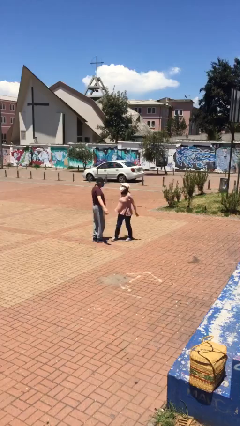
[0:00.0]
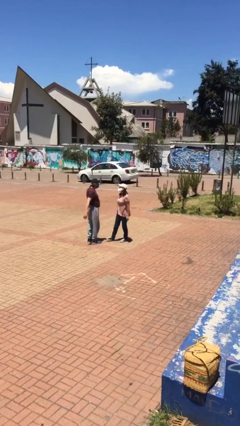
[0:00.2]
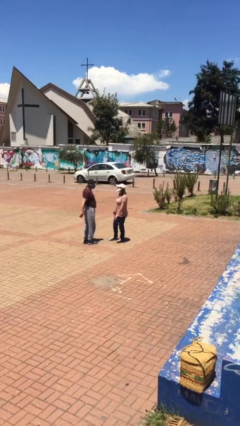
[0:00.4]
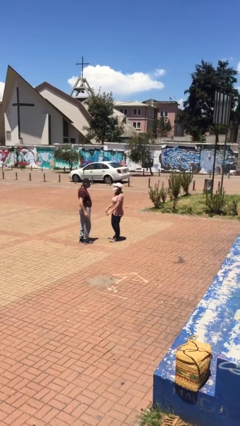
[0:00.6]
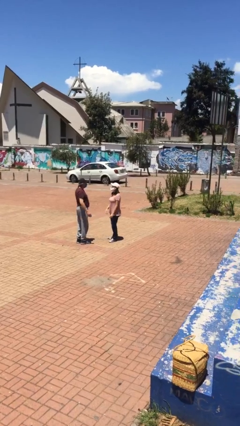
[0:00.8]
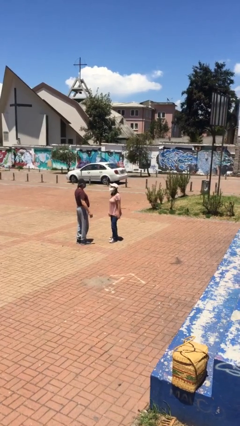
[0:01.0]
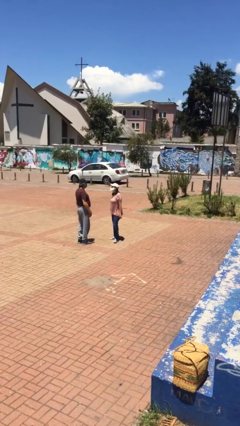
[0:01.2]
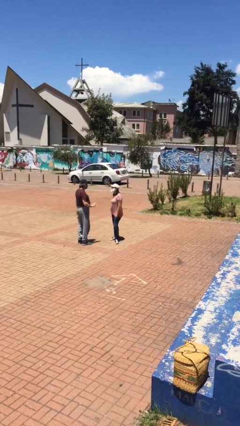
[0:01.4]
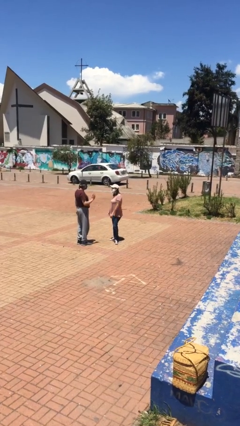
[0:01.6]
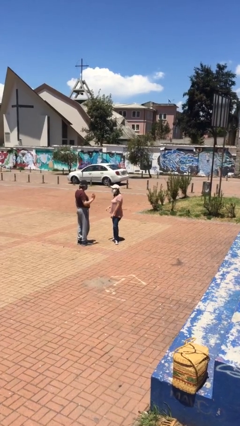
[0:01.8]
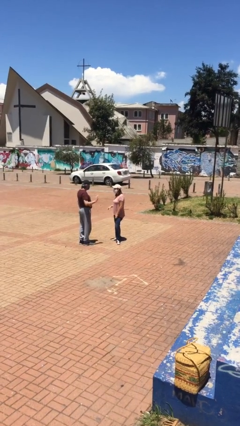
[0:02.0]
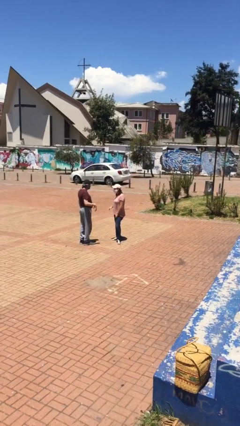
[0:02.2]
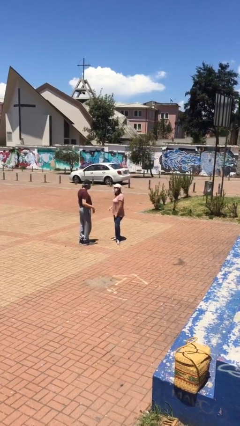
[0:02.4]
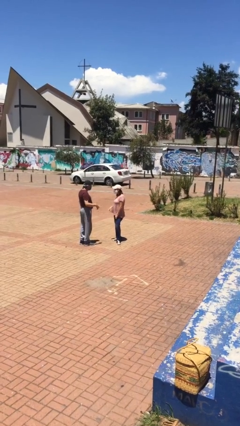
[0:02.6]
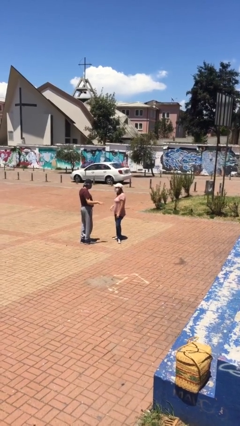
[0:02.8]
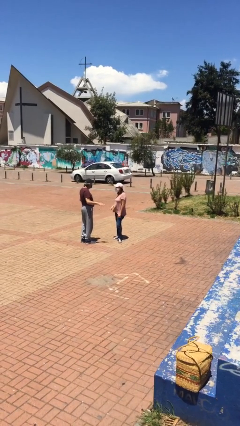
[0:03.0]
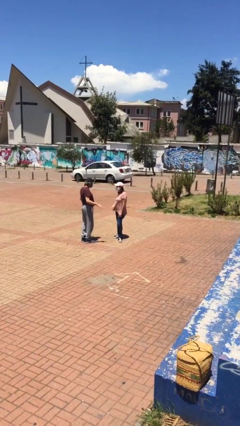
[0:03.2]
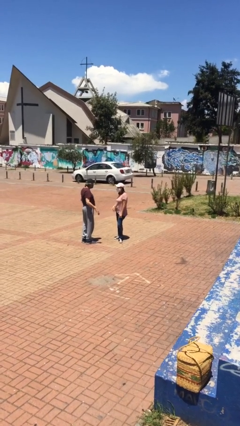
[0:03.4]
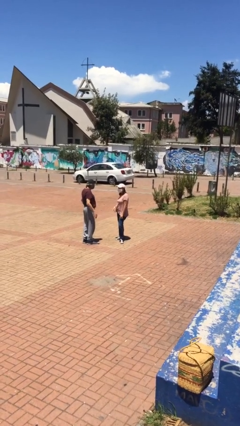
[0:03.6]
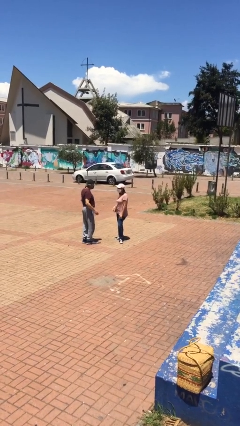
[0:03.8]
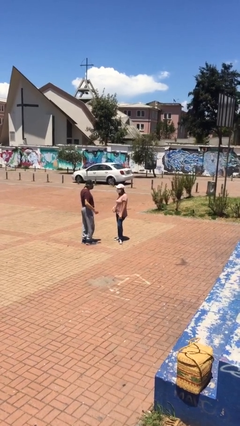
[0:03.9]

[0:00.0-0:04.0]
person talks to person

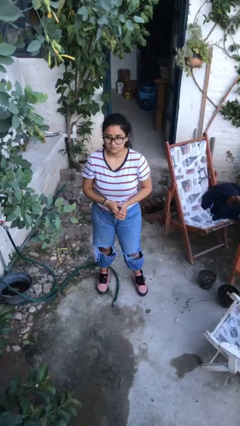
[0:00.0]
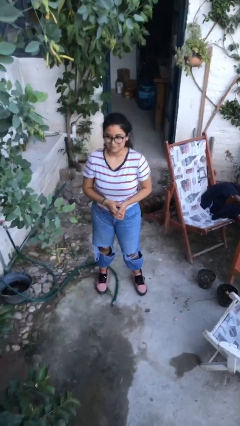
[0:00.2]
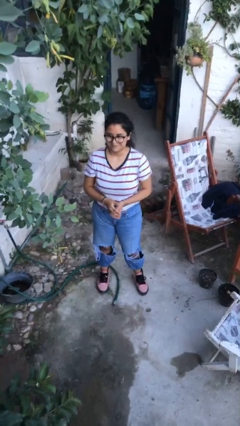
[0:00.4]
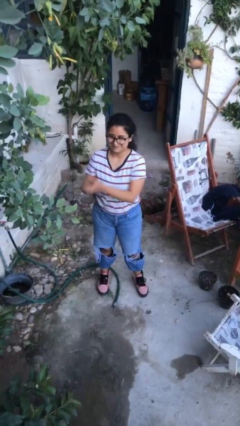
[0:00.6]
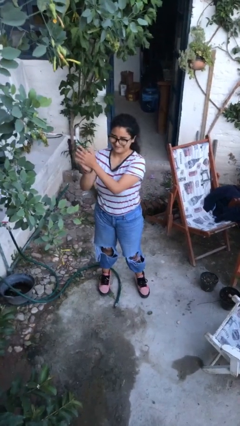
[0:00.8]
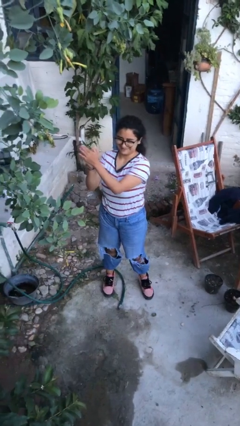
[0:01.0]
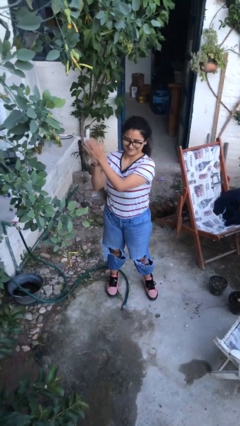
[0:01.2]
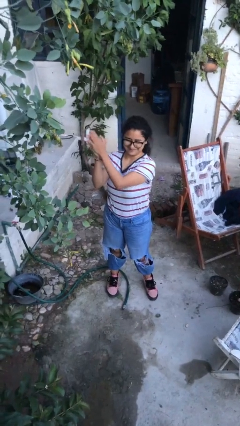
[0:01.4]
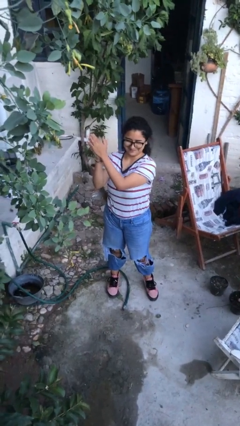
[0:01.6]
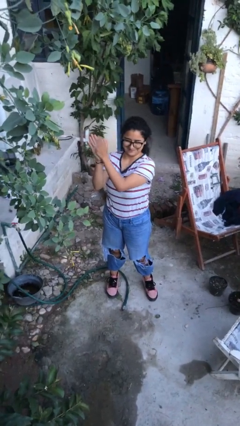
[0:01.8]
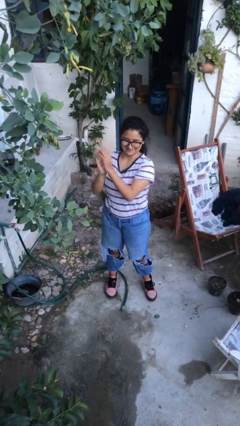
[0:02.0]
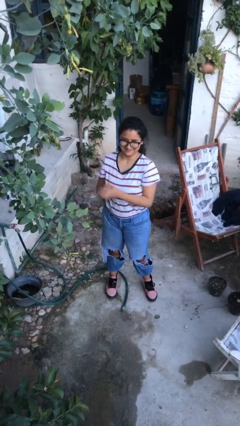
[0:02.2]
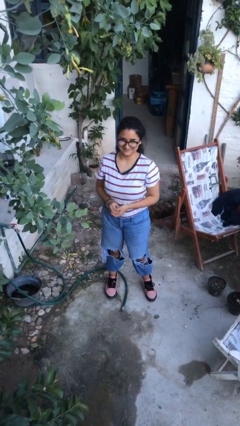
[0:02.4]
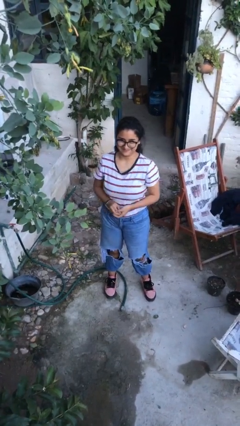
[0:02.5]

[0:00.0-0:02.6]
person claps hands

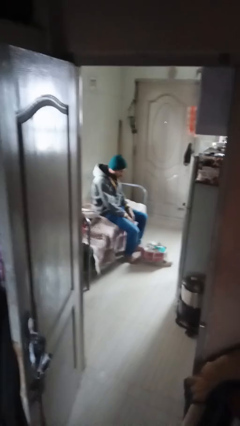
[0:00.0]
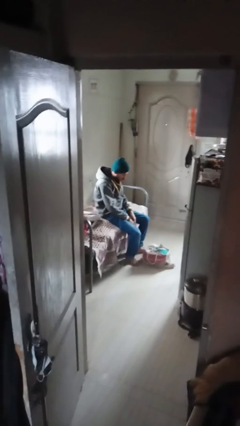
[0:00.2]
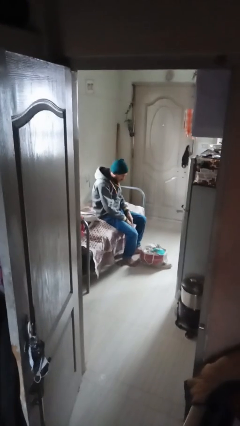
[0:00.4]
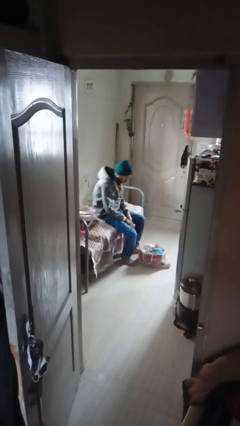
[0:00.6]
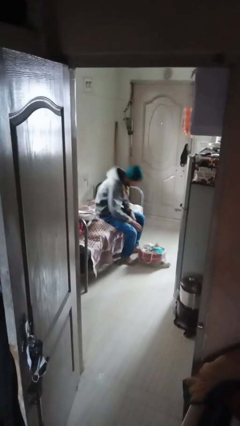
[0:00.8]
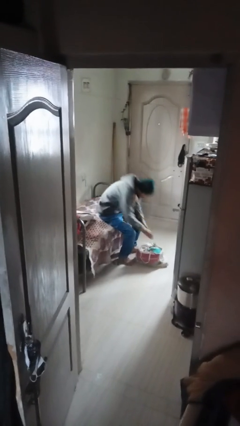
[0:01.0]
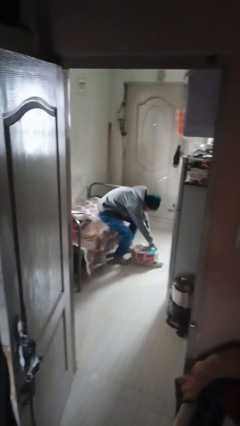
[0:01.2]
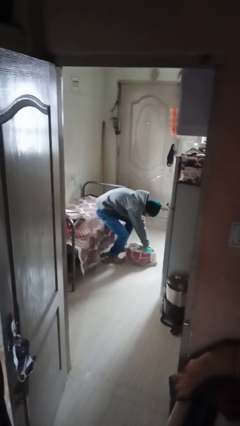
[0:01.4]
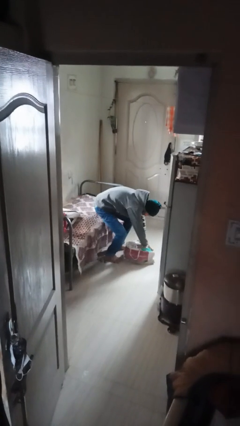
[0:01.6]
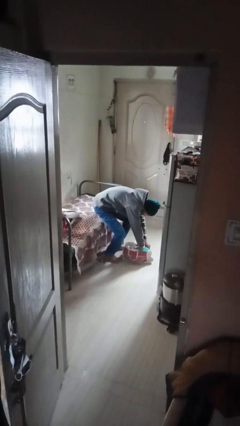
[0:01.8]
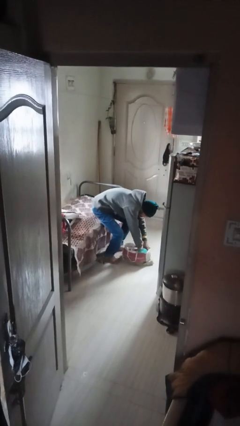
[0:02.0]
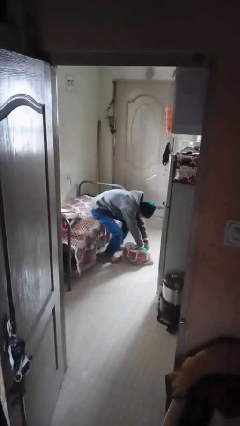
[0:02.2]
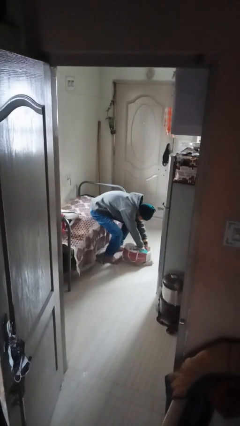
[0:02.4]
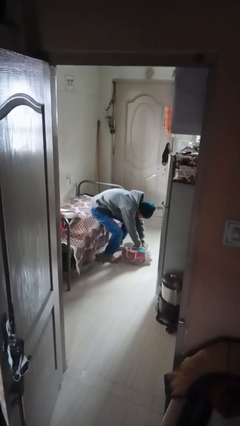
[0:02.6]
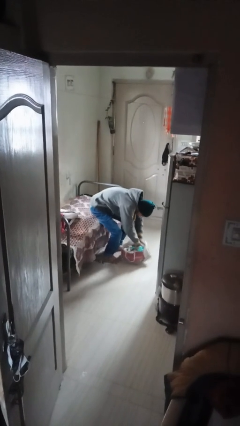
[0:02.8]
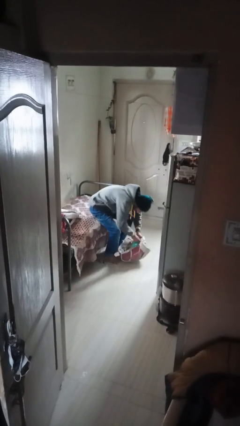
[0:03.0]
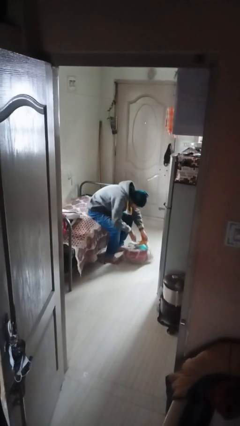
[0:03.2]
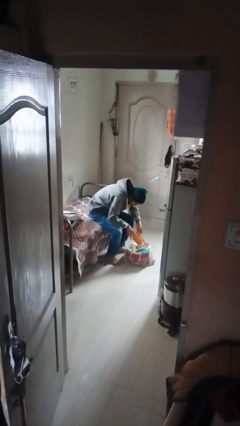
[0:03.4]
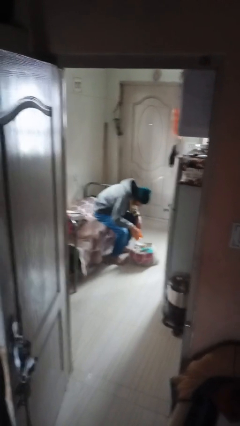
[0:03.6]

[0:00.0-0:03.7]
person searches in bag

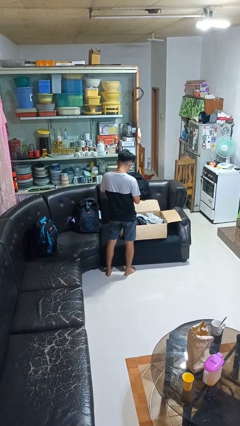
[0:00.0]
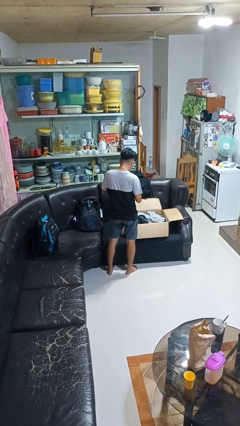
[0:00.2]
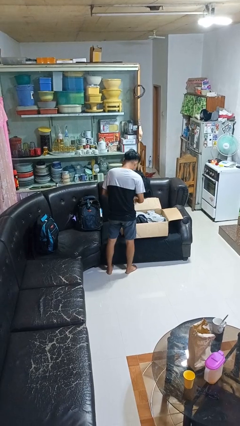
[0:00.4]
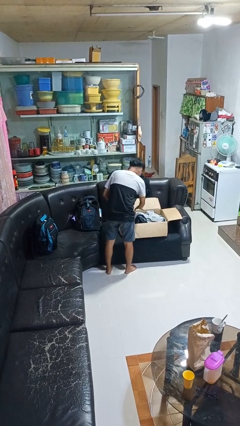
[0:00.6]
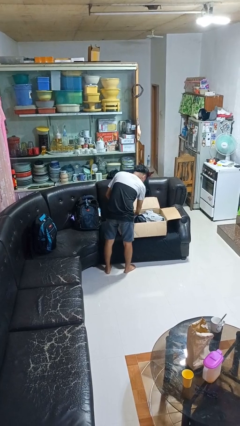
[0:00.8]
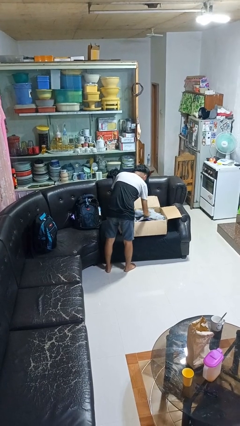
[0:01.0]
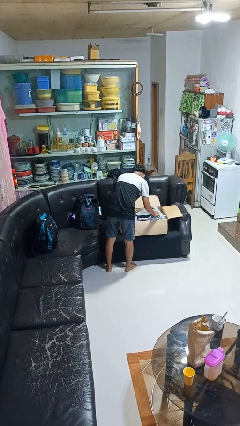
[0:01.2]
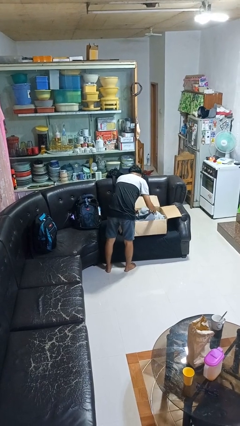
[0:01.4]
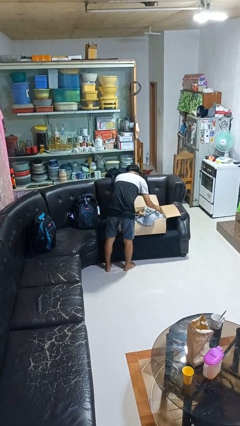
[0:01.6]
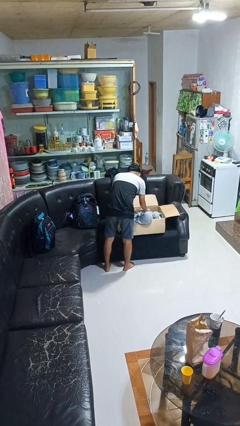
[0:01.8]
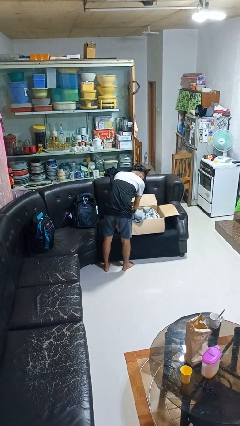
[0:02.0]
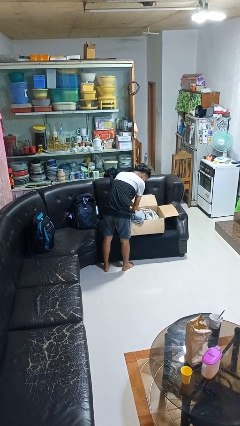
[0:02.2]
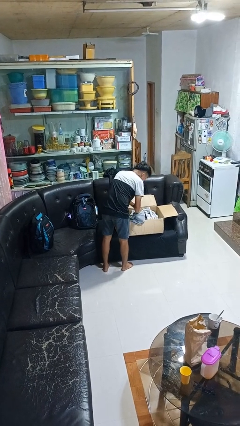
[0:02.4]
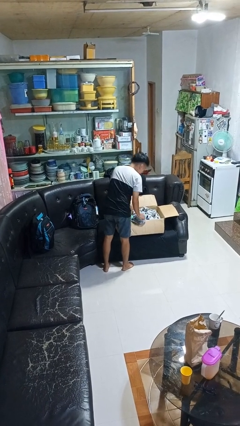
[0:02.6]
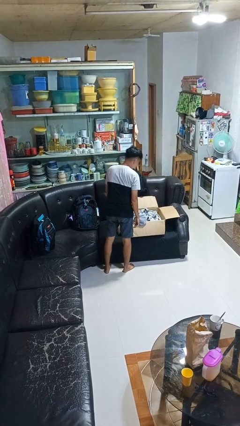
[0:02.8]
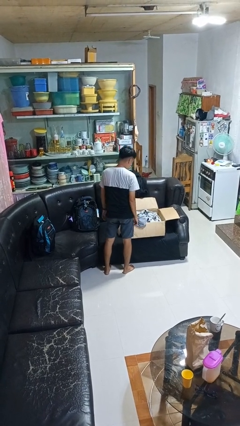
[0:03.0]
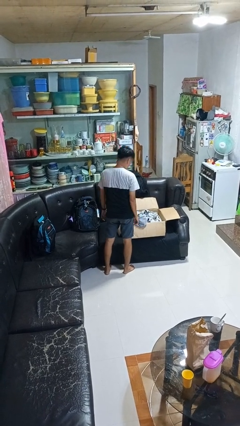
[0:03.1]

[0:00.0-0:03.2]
person searches in box

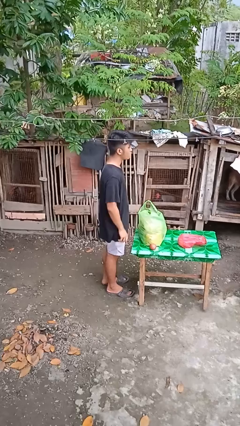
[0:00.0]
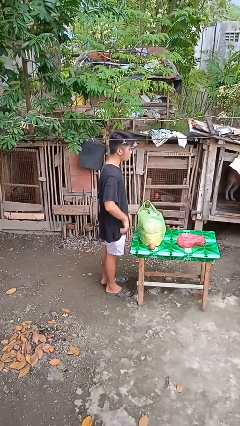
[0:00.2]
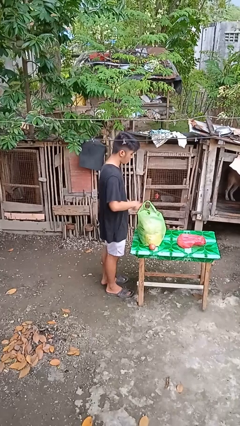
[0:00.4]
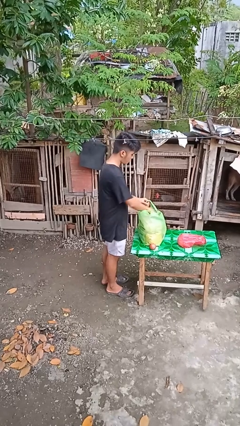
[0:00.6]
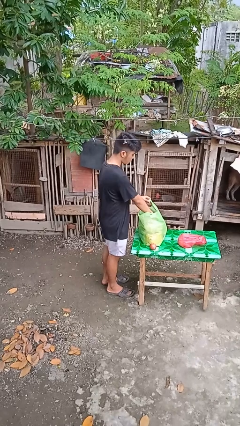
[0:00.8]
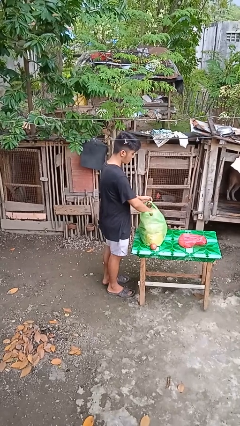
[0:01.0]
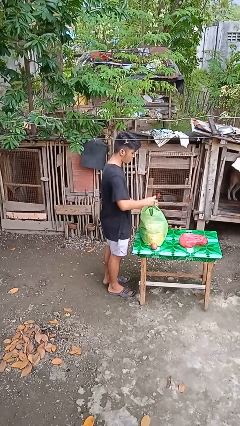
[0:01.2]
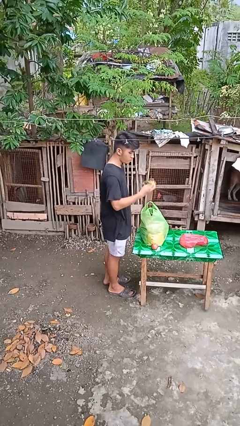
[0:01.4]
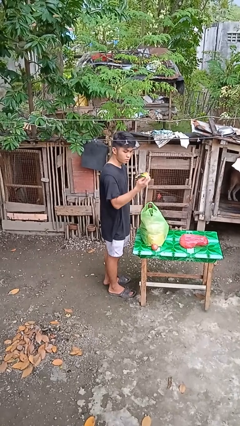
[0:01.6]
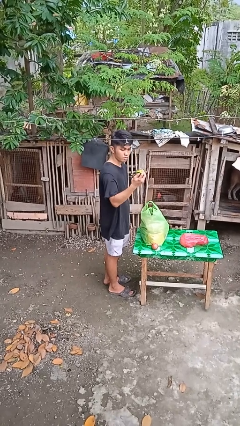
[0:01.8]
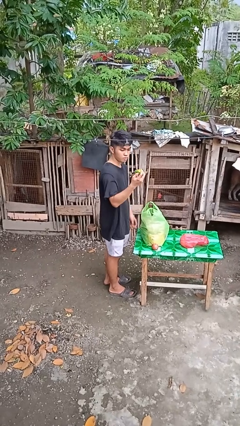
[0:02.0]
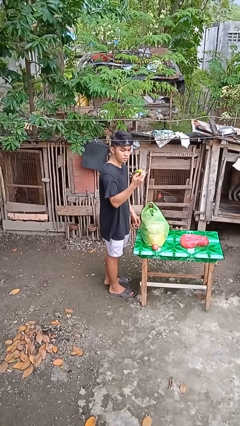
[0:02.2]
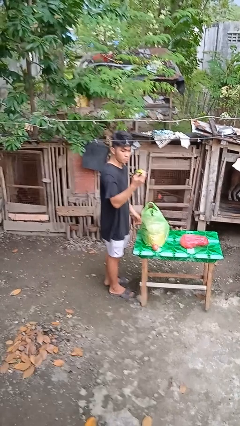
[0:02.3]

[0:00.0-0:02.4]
person takes object from bag

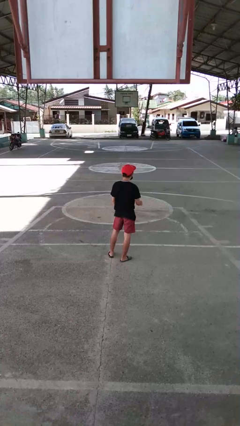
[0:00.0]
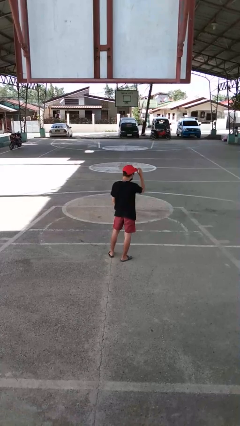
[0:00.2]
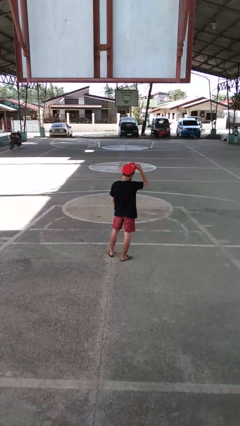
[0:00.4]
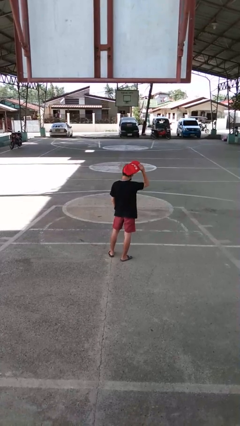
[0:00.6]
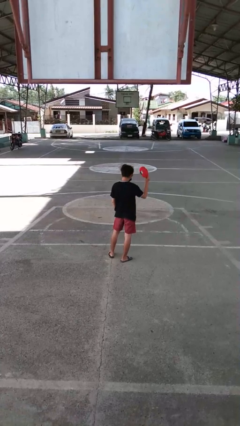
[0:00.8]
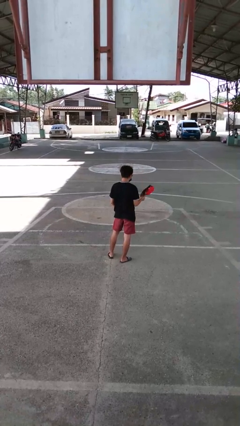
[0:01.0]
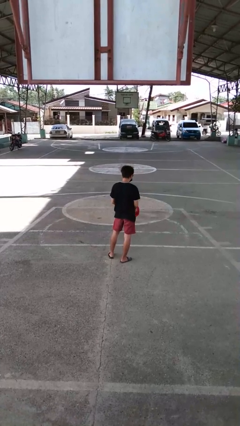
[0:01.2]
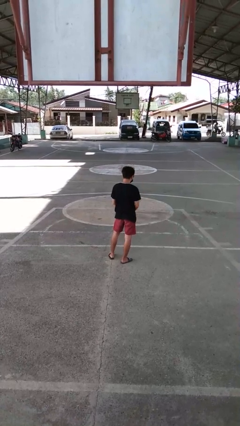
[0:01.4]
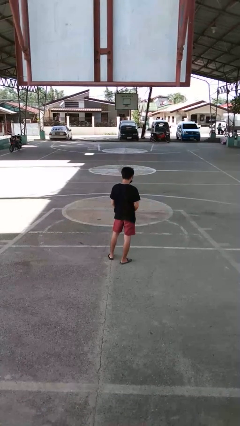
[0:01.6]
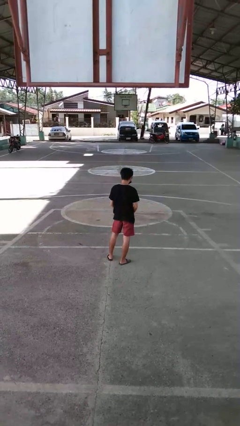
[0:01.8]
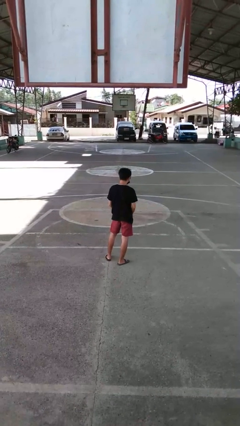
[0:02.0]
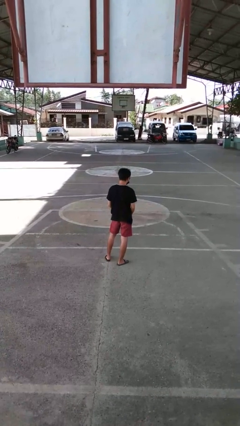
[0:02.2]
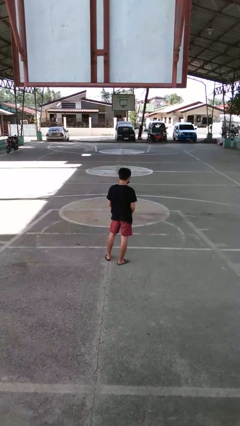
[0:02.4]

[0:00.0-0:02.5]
person takes off hat
